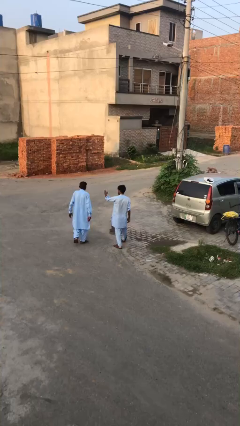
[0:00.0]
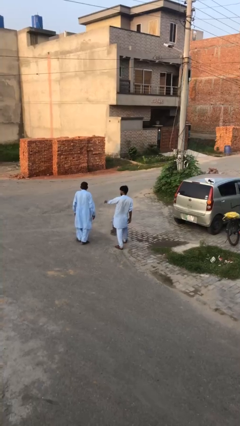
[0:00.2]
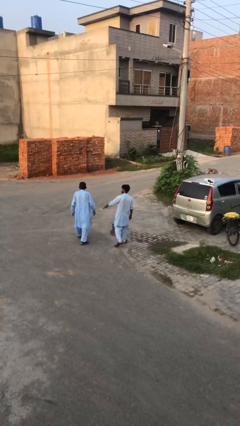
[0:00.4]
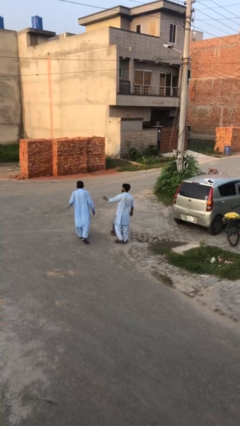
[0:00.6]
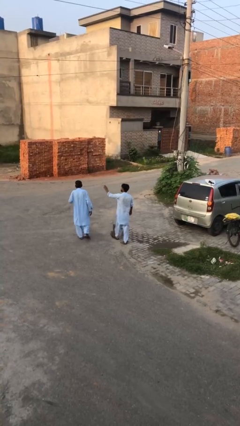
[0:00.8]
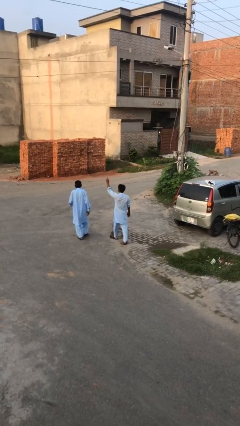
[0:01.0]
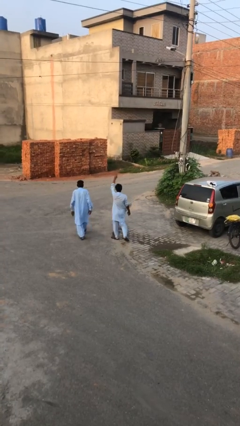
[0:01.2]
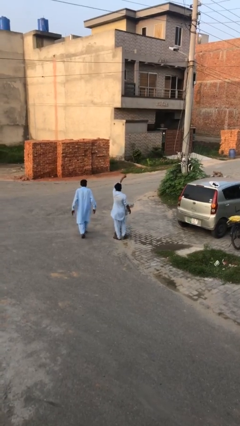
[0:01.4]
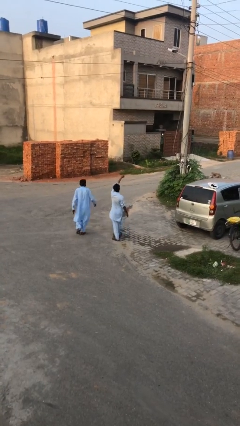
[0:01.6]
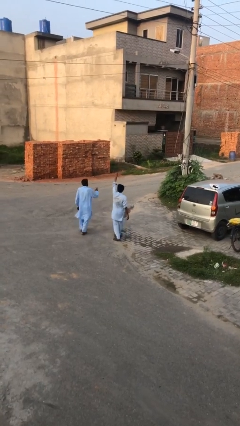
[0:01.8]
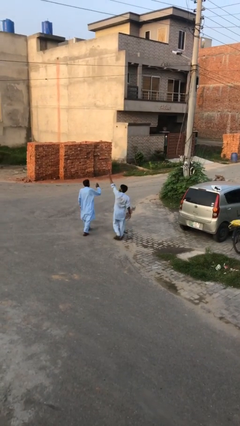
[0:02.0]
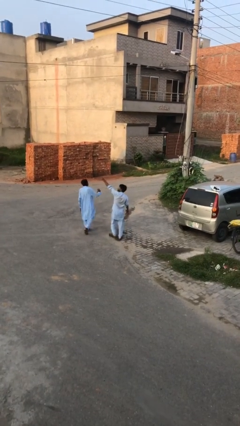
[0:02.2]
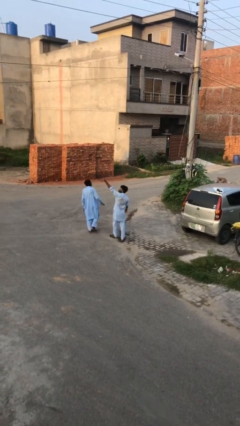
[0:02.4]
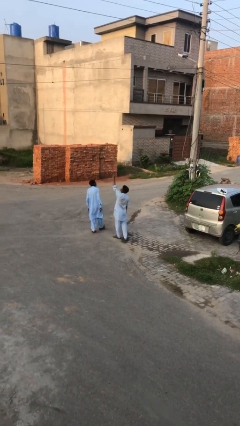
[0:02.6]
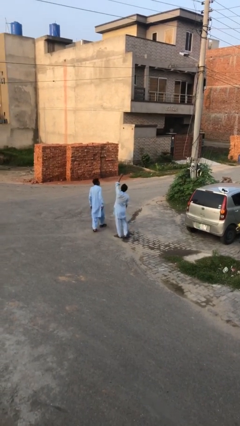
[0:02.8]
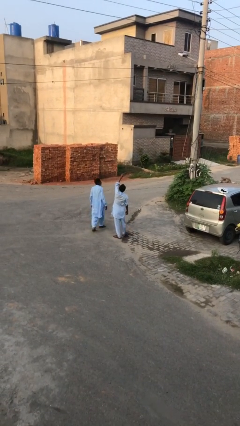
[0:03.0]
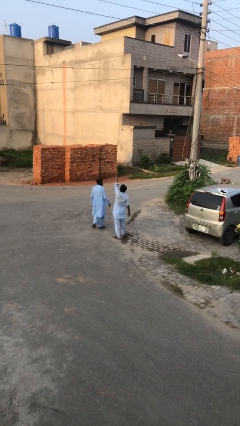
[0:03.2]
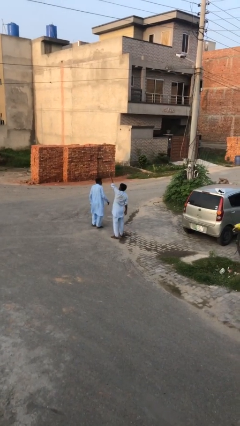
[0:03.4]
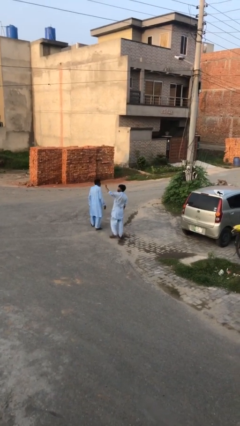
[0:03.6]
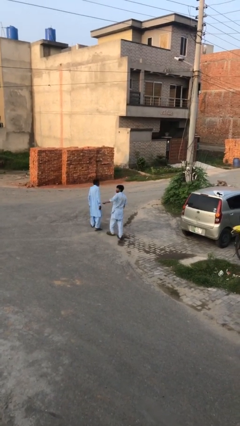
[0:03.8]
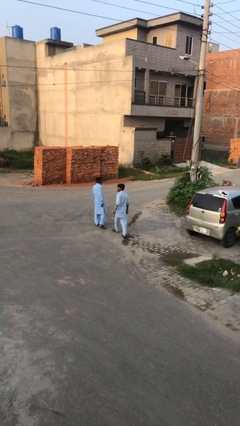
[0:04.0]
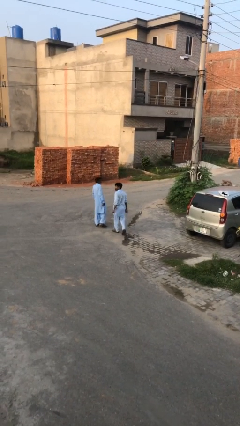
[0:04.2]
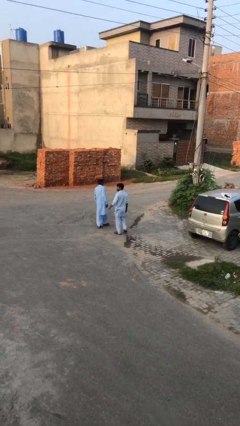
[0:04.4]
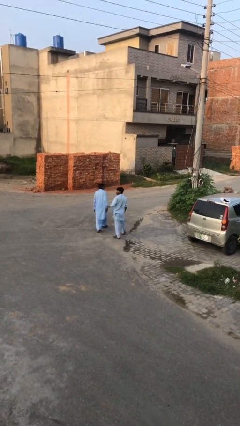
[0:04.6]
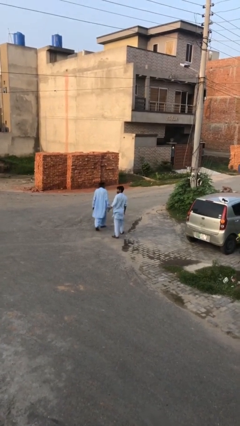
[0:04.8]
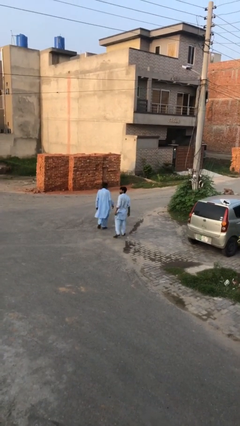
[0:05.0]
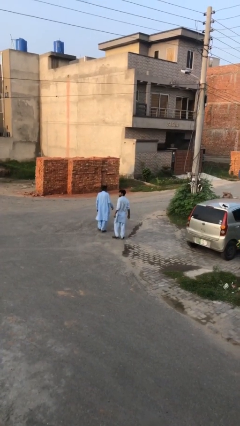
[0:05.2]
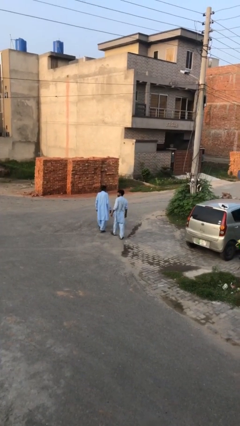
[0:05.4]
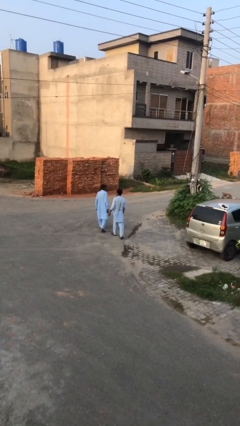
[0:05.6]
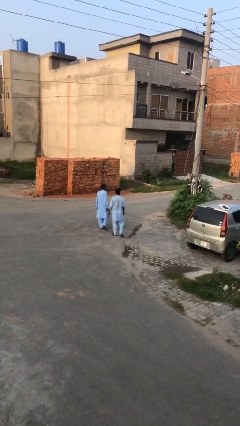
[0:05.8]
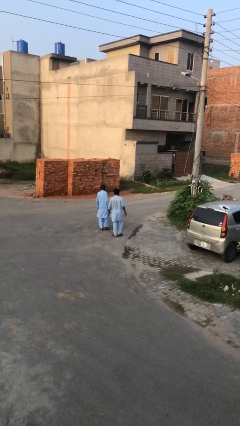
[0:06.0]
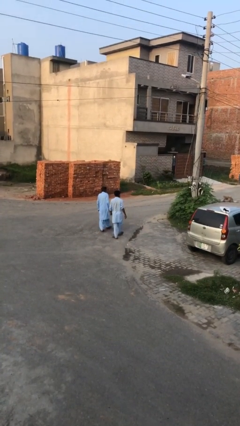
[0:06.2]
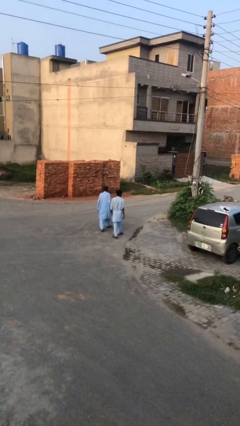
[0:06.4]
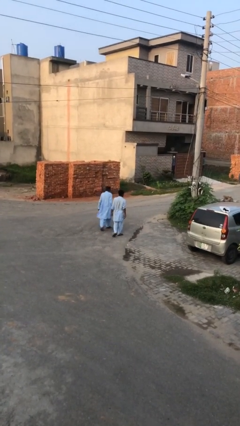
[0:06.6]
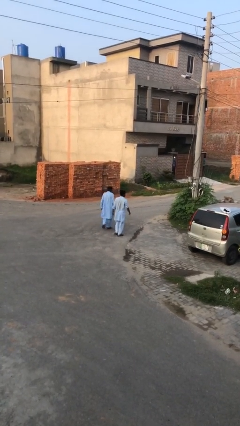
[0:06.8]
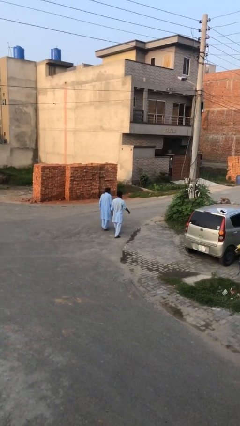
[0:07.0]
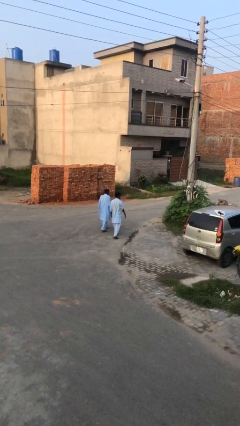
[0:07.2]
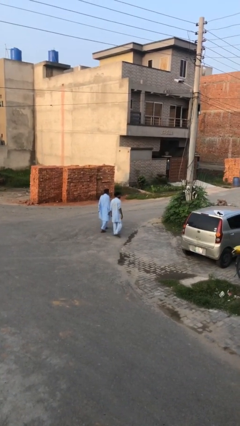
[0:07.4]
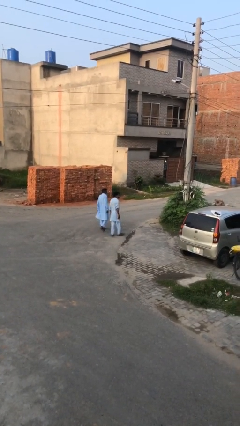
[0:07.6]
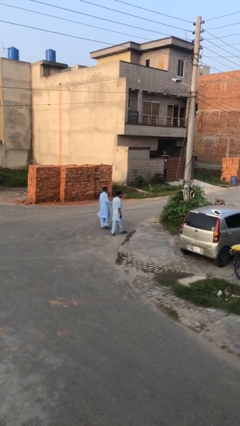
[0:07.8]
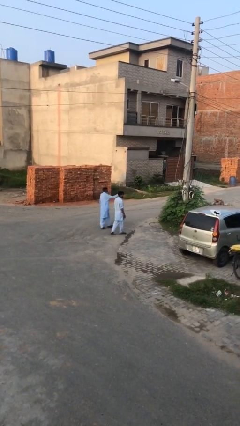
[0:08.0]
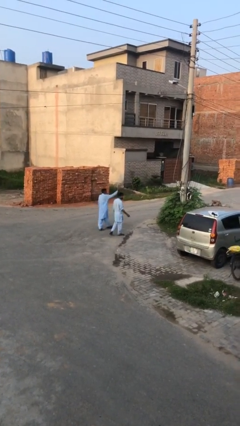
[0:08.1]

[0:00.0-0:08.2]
person talks to person

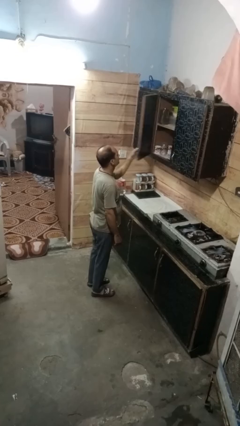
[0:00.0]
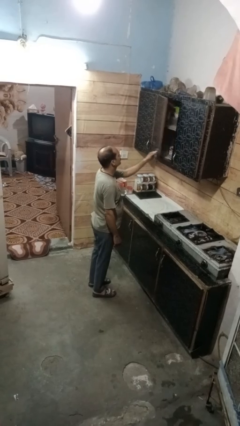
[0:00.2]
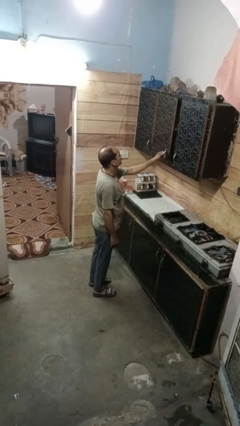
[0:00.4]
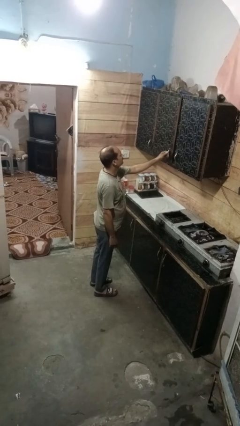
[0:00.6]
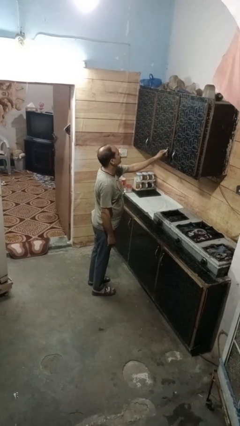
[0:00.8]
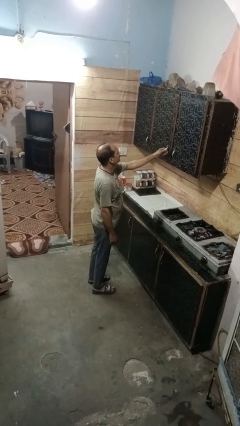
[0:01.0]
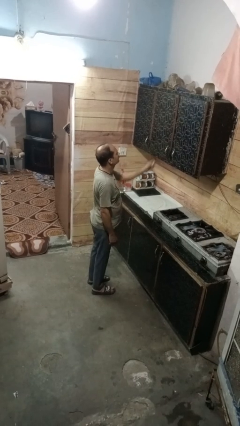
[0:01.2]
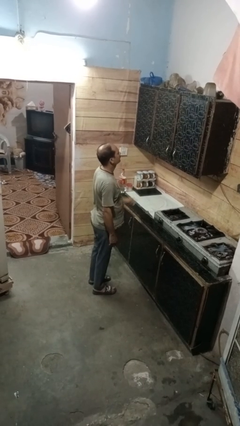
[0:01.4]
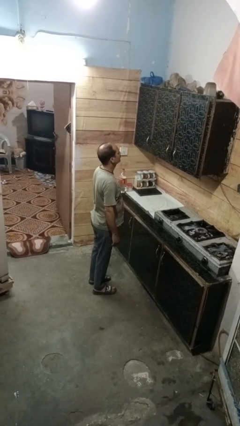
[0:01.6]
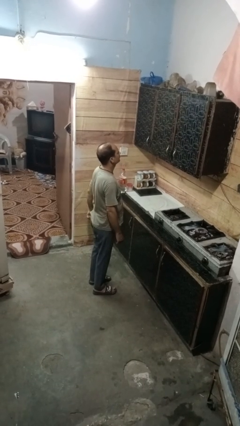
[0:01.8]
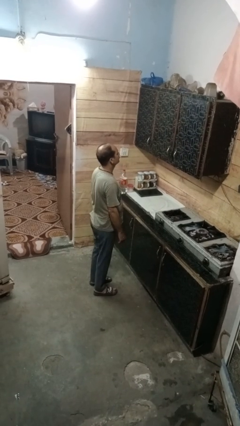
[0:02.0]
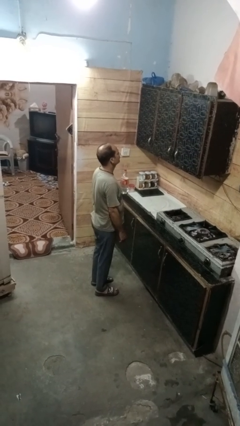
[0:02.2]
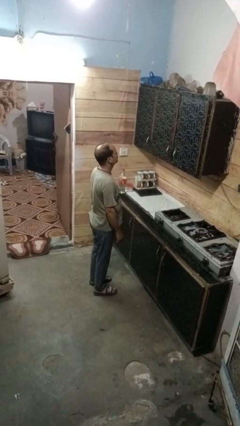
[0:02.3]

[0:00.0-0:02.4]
person closes cabinet

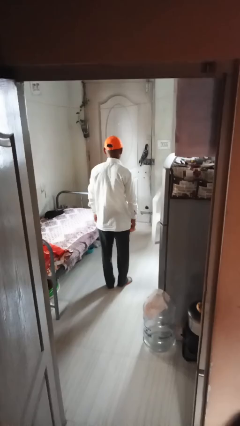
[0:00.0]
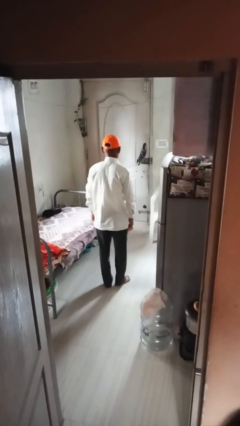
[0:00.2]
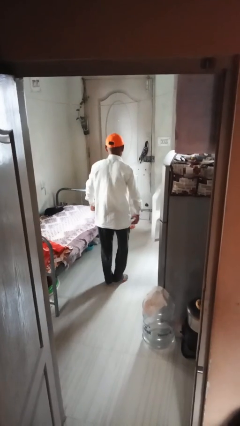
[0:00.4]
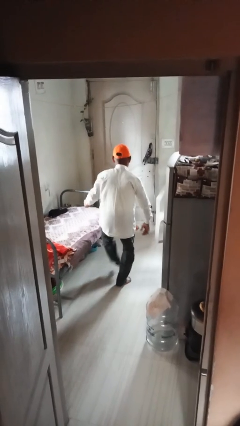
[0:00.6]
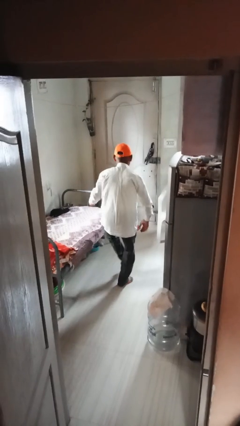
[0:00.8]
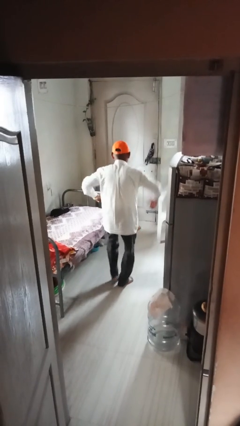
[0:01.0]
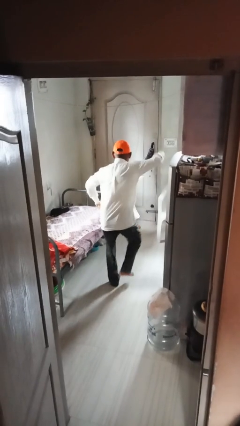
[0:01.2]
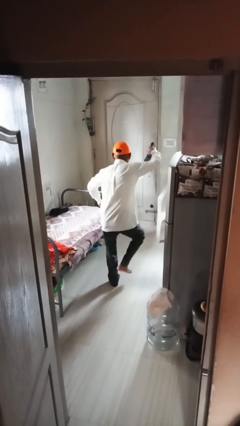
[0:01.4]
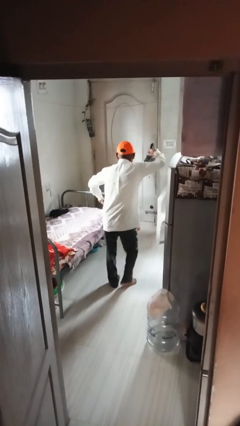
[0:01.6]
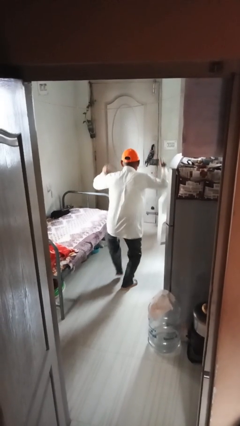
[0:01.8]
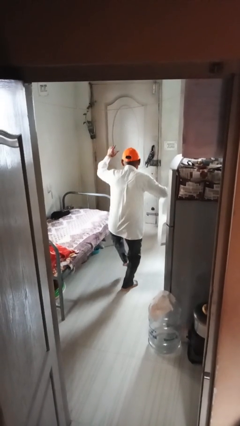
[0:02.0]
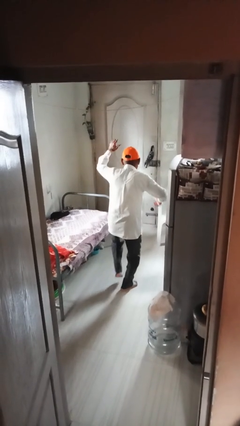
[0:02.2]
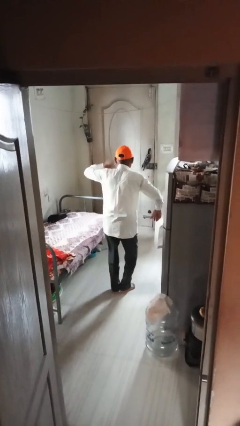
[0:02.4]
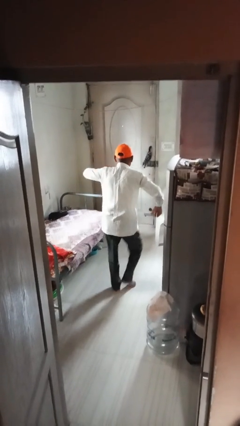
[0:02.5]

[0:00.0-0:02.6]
person dances in place

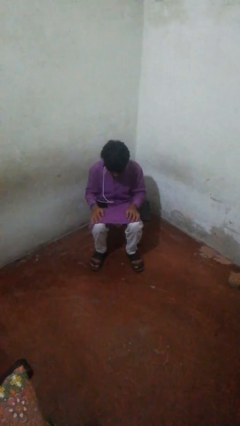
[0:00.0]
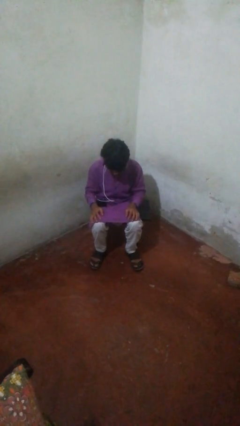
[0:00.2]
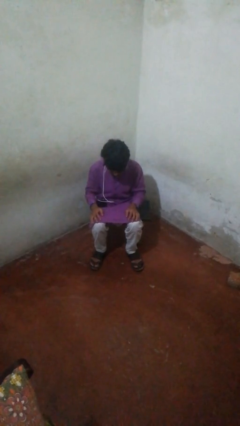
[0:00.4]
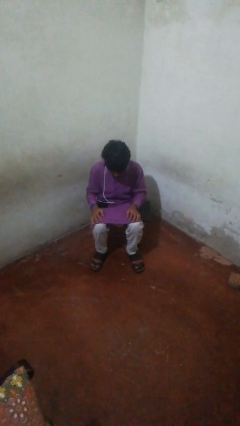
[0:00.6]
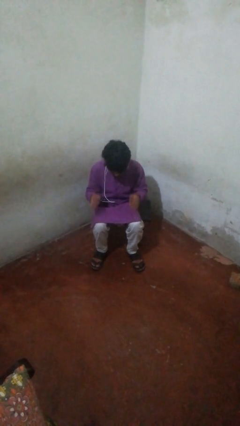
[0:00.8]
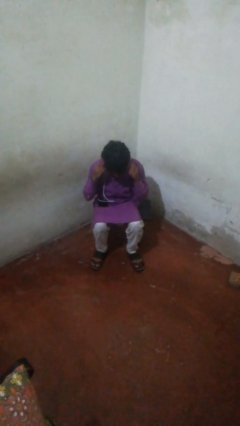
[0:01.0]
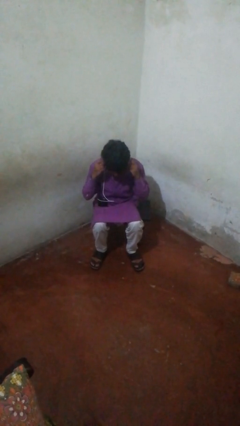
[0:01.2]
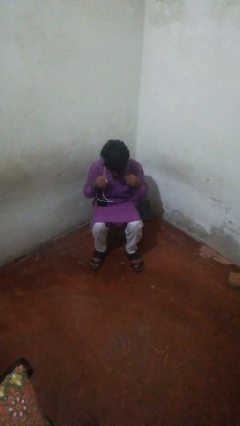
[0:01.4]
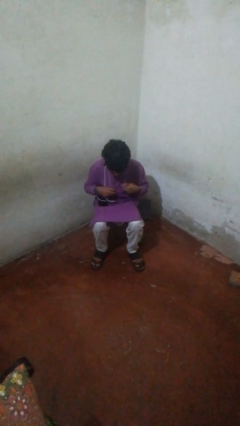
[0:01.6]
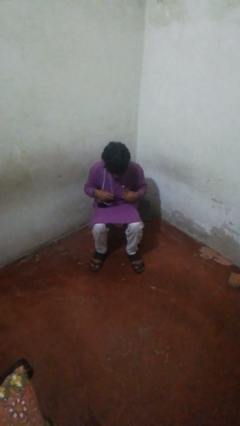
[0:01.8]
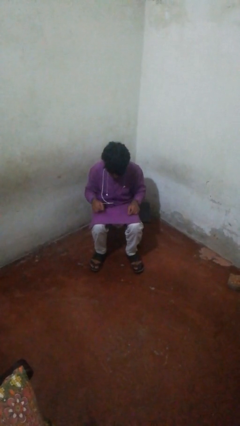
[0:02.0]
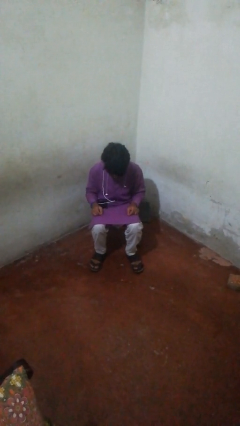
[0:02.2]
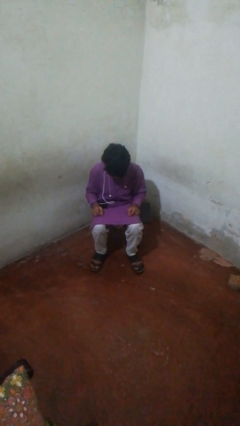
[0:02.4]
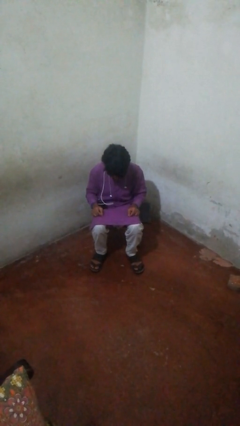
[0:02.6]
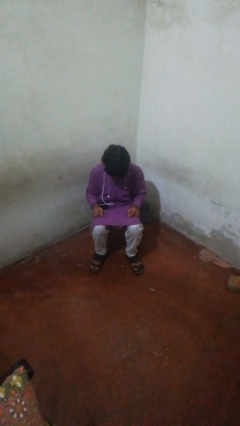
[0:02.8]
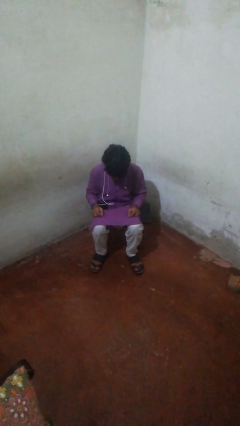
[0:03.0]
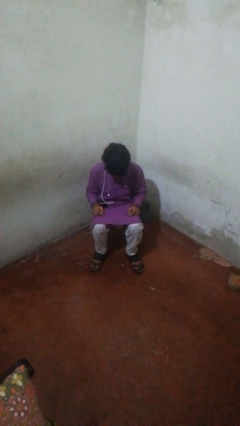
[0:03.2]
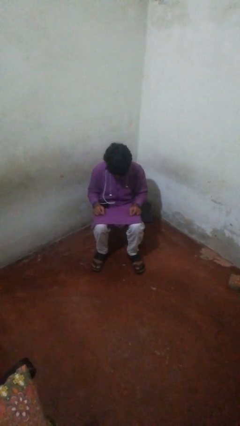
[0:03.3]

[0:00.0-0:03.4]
person takes off headphones

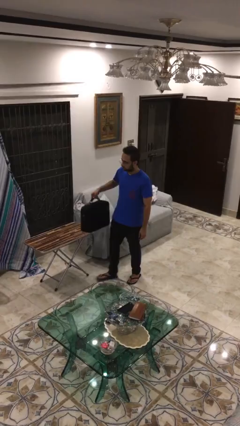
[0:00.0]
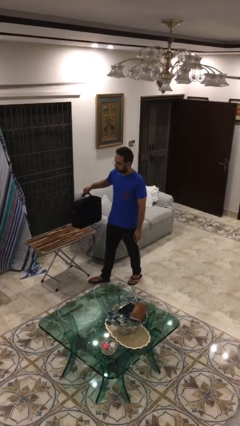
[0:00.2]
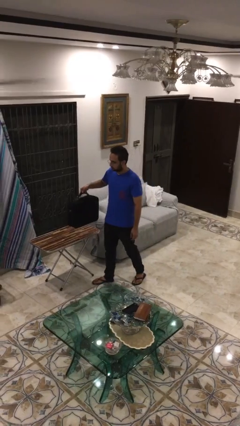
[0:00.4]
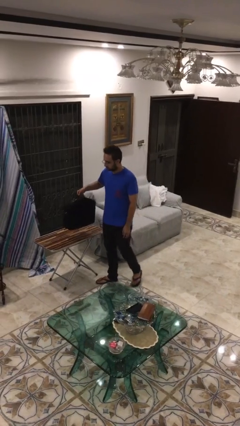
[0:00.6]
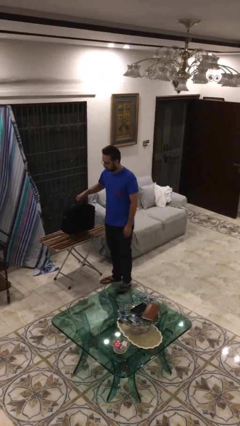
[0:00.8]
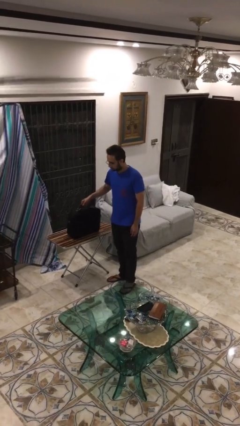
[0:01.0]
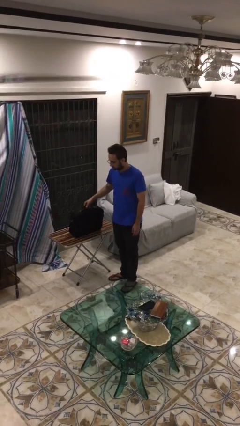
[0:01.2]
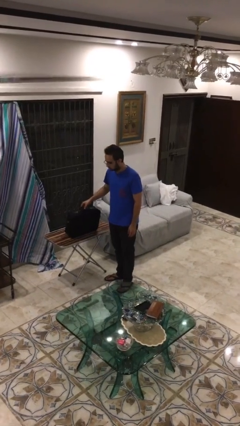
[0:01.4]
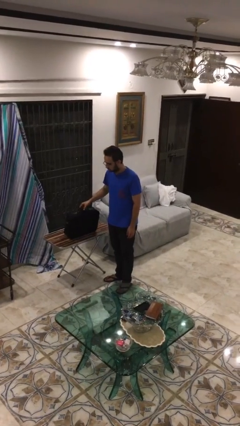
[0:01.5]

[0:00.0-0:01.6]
person puts down object on table
